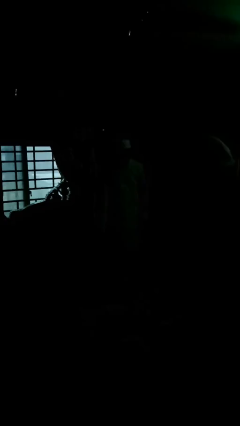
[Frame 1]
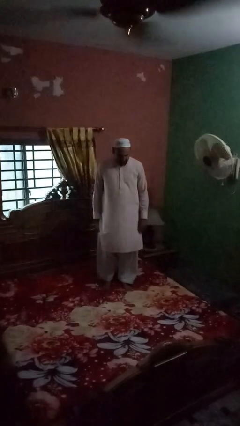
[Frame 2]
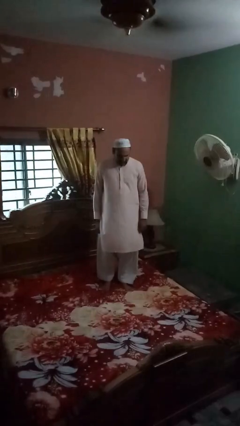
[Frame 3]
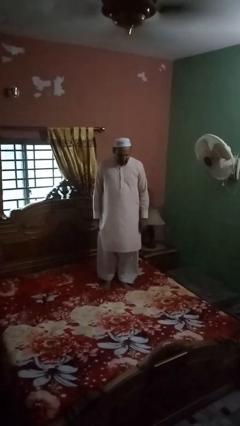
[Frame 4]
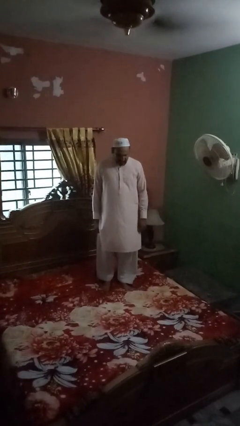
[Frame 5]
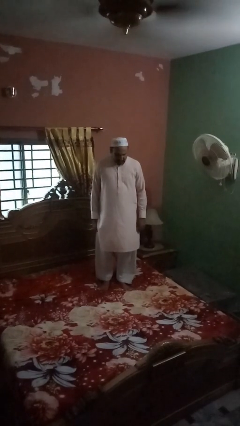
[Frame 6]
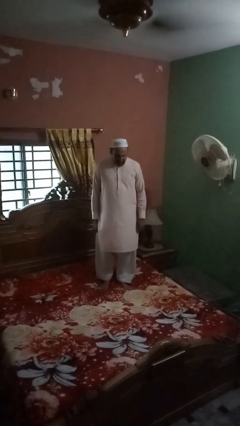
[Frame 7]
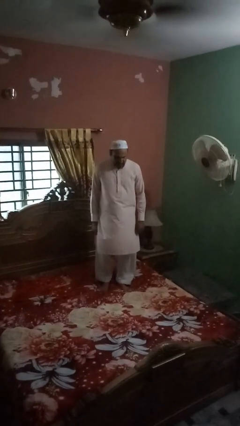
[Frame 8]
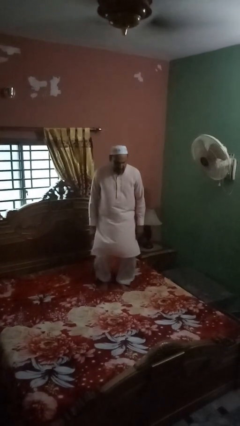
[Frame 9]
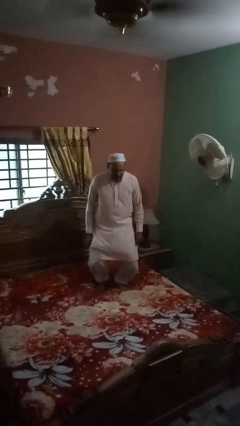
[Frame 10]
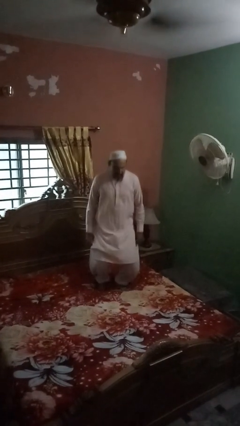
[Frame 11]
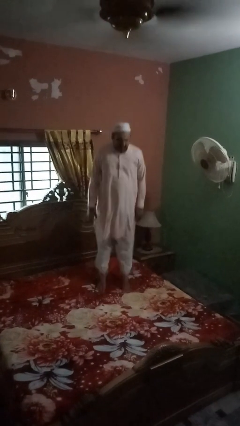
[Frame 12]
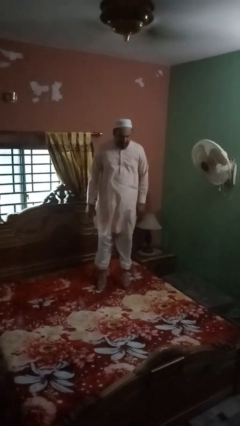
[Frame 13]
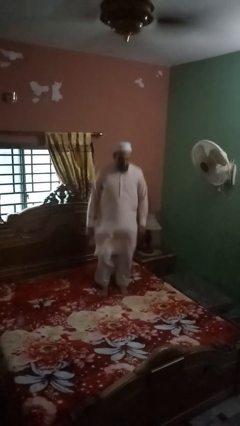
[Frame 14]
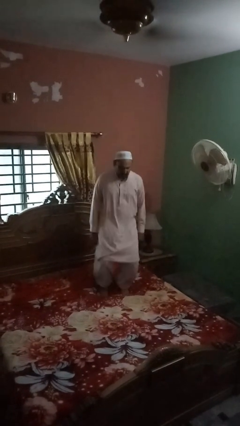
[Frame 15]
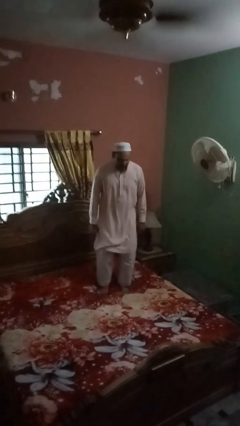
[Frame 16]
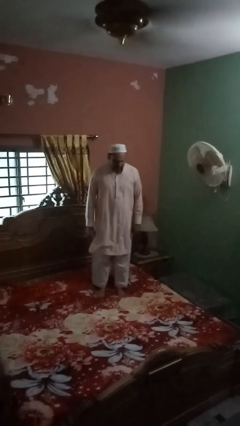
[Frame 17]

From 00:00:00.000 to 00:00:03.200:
person jumps on bed

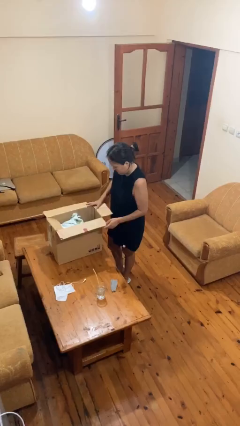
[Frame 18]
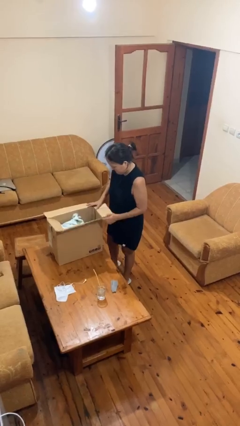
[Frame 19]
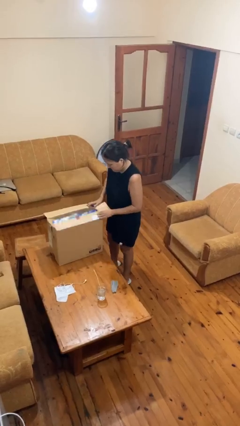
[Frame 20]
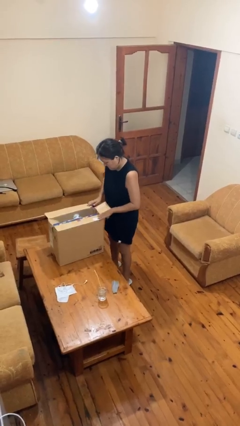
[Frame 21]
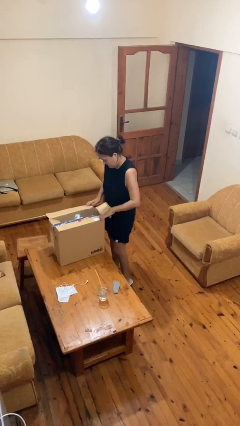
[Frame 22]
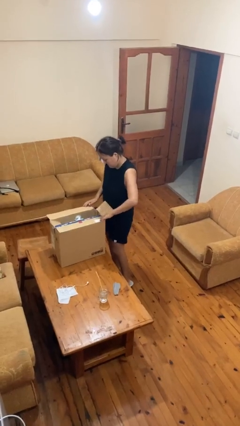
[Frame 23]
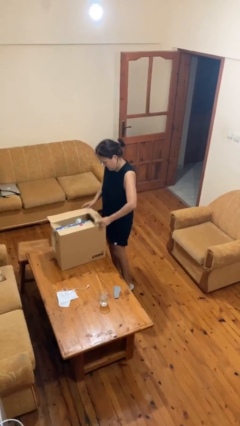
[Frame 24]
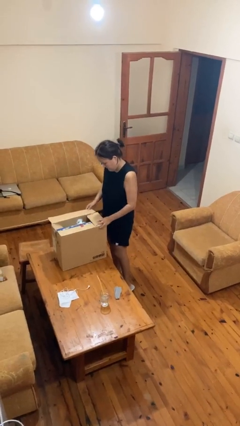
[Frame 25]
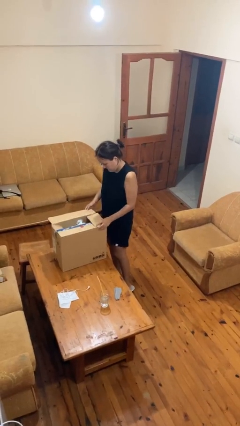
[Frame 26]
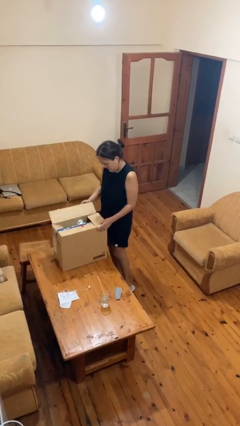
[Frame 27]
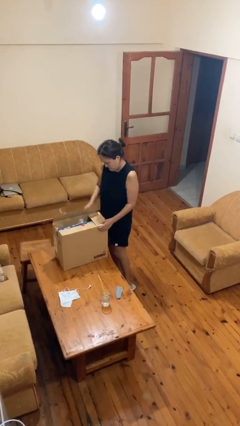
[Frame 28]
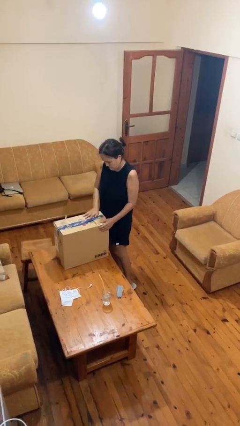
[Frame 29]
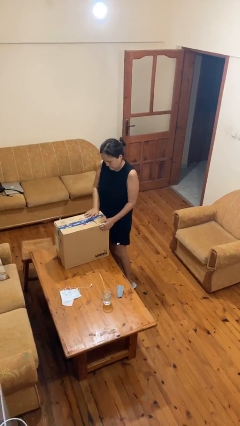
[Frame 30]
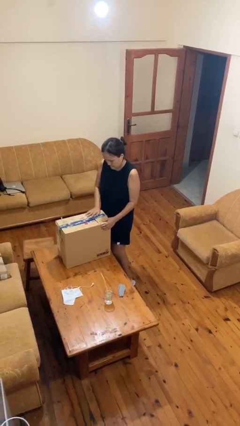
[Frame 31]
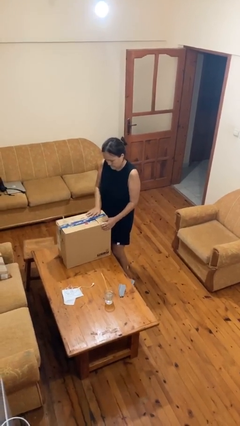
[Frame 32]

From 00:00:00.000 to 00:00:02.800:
person closes box

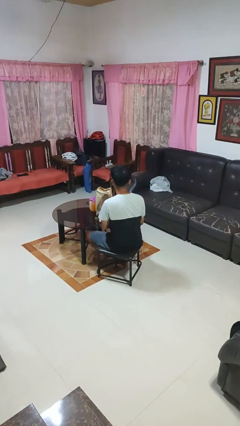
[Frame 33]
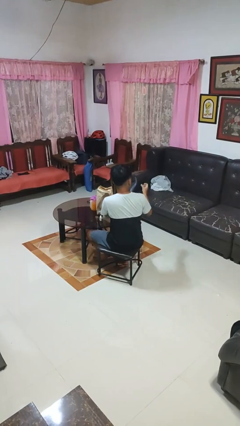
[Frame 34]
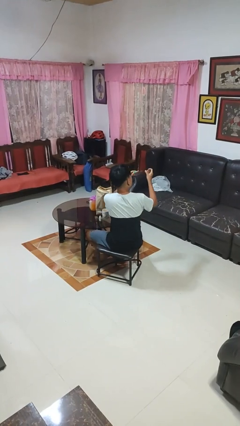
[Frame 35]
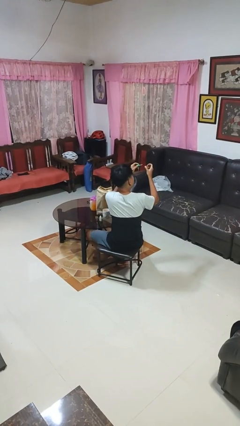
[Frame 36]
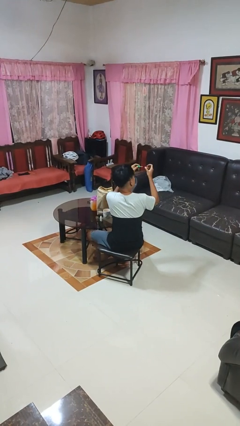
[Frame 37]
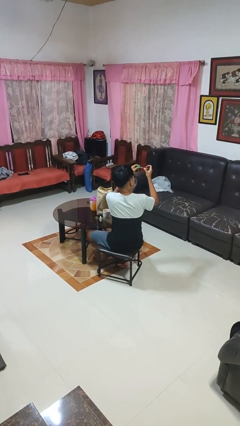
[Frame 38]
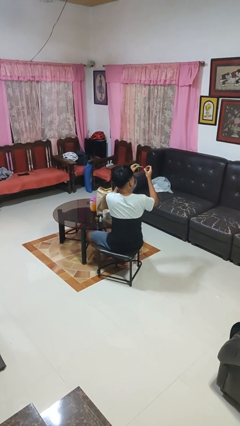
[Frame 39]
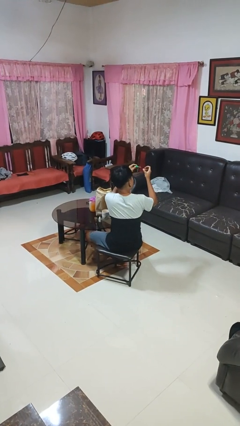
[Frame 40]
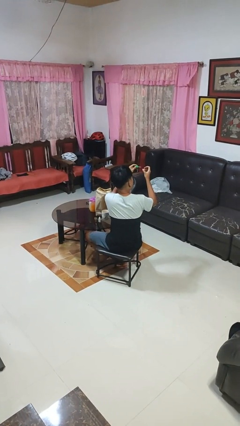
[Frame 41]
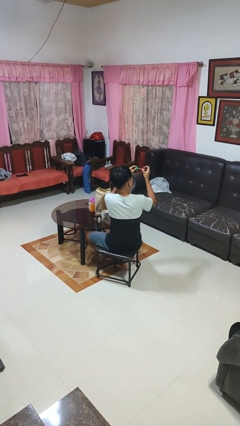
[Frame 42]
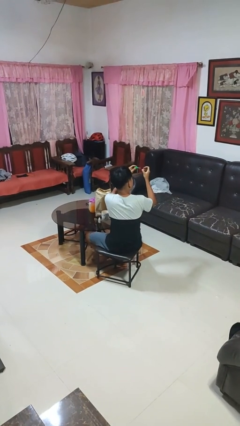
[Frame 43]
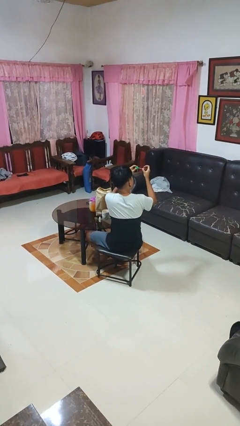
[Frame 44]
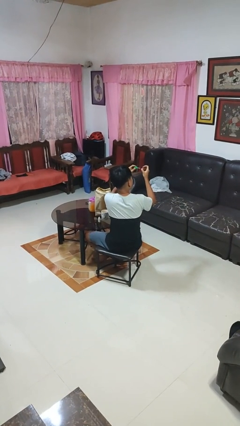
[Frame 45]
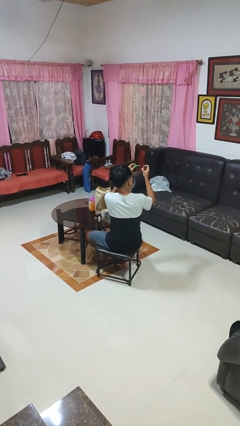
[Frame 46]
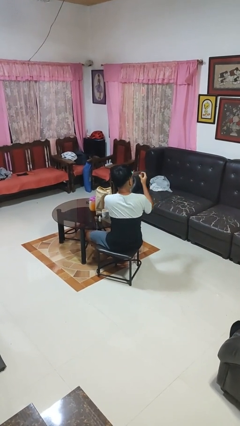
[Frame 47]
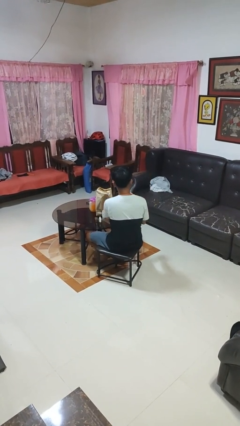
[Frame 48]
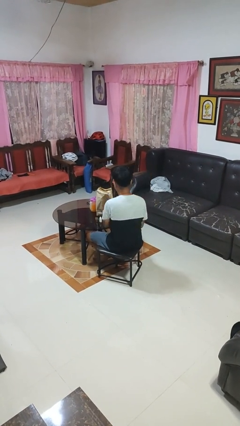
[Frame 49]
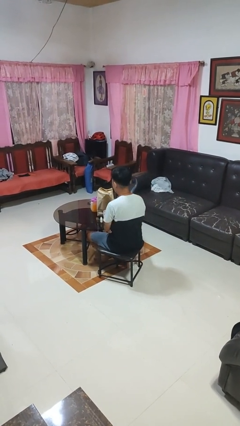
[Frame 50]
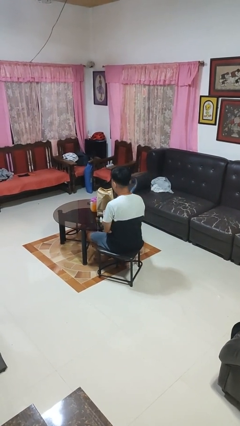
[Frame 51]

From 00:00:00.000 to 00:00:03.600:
person paints fingernails

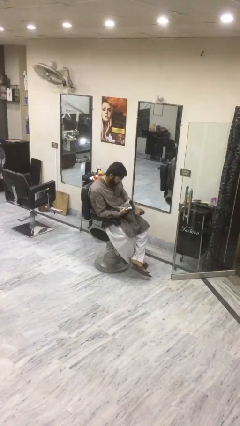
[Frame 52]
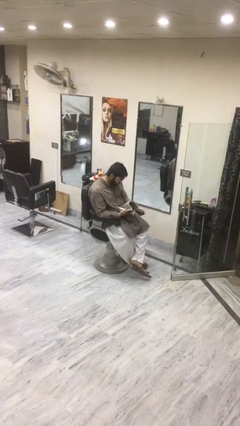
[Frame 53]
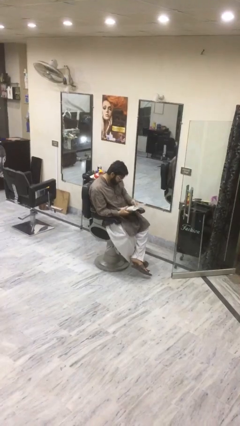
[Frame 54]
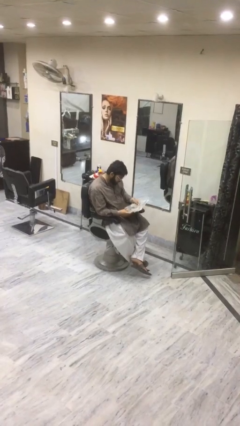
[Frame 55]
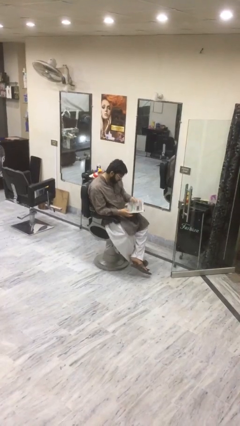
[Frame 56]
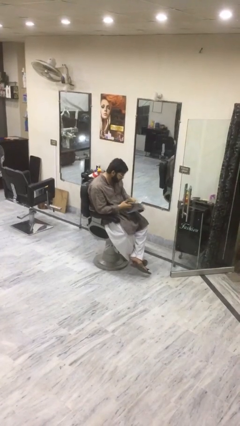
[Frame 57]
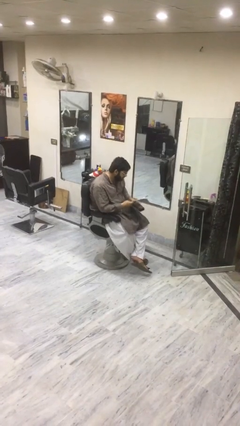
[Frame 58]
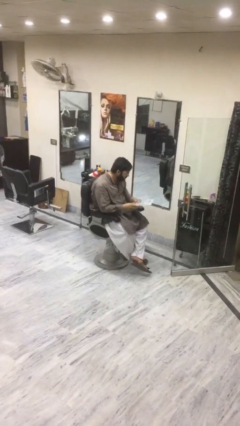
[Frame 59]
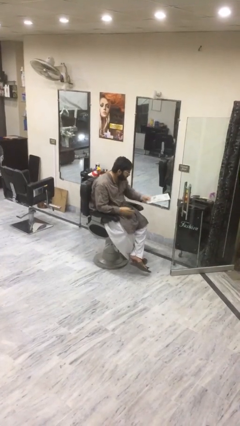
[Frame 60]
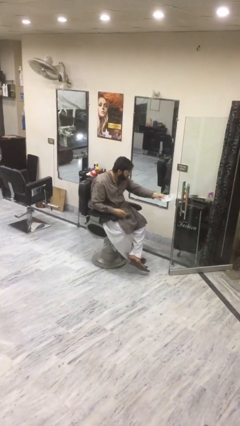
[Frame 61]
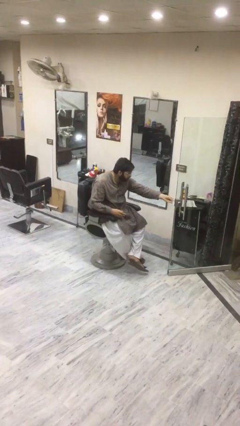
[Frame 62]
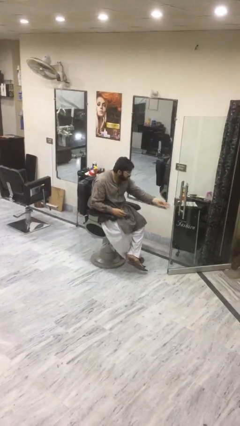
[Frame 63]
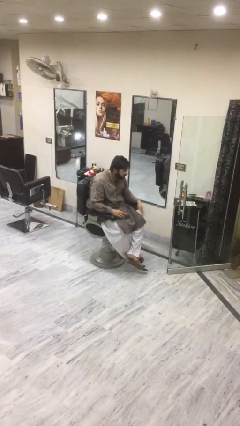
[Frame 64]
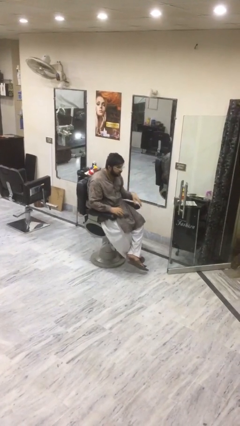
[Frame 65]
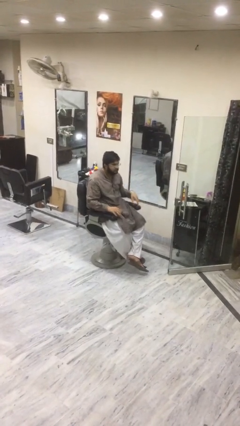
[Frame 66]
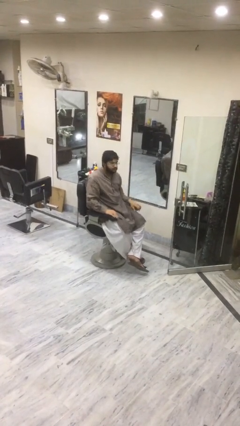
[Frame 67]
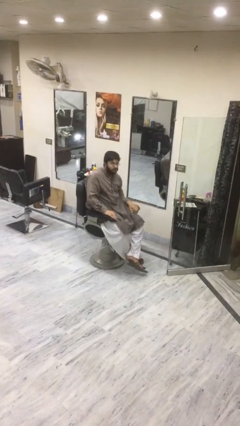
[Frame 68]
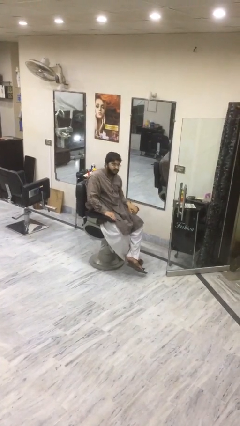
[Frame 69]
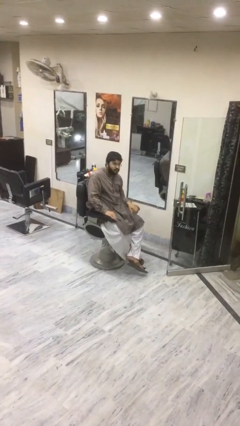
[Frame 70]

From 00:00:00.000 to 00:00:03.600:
person puts down object on table

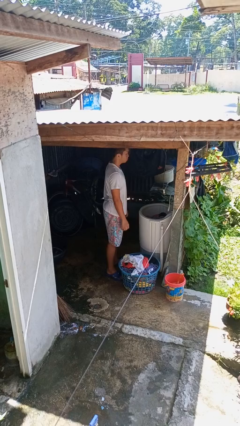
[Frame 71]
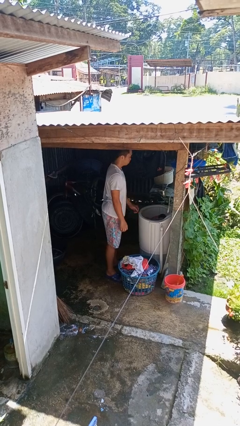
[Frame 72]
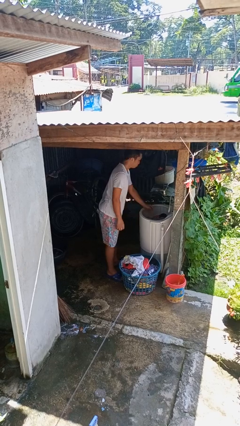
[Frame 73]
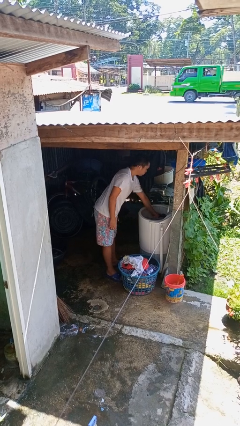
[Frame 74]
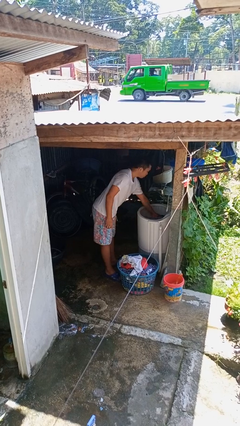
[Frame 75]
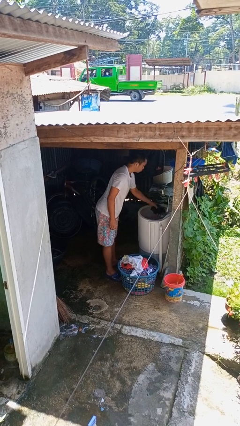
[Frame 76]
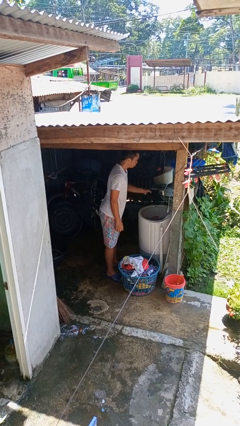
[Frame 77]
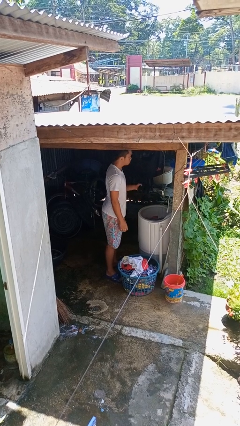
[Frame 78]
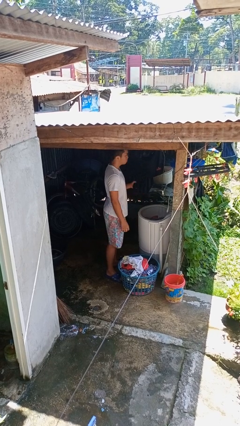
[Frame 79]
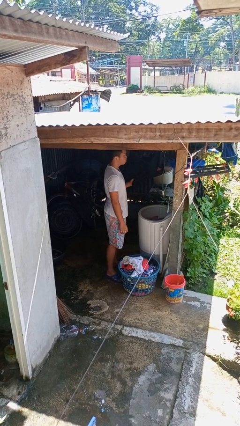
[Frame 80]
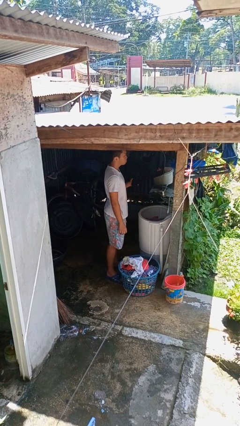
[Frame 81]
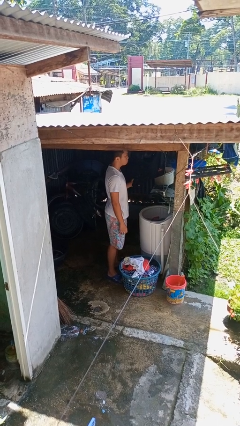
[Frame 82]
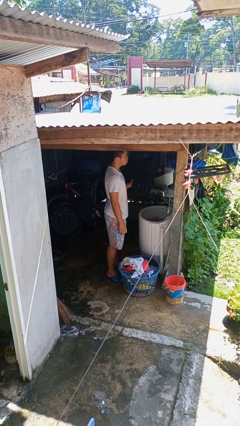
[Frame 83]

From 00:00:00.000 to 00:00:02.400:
person unloads clotheswasher

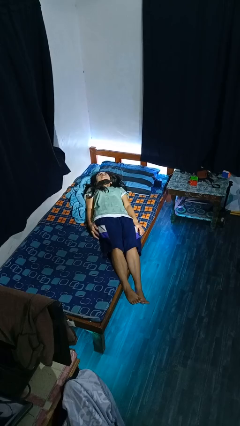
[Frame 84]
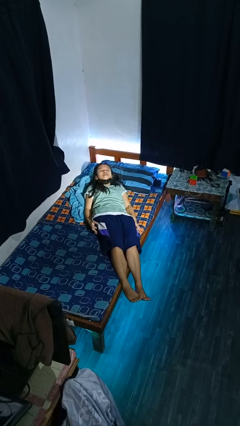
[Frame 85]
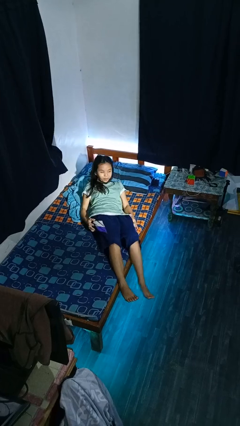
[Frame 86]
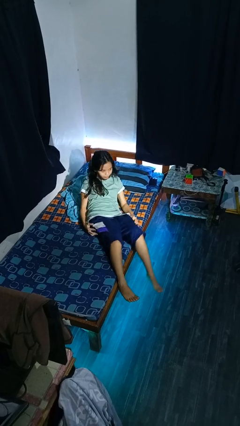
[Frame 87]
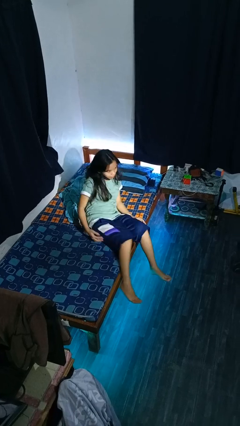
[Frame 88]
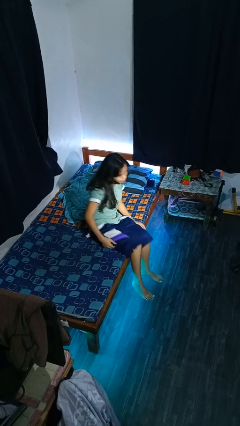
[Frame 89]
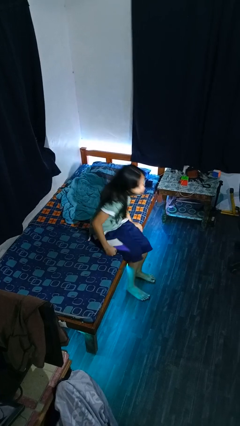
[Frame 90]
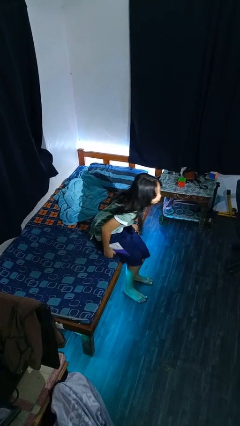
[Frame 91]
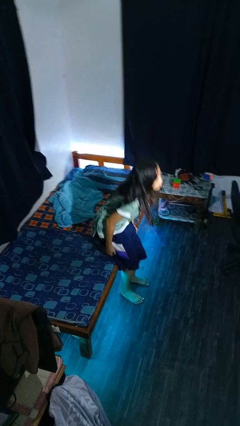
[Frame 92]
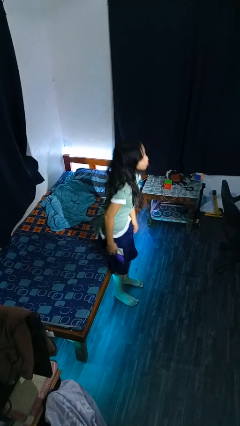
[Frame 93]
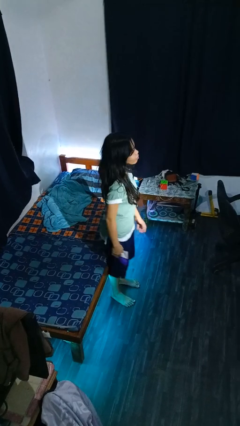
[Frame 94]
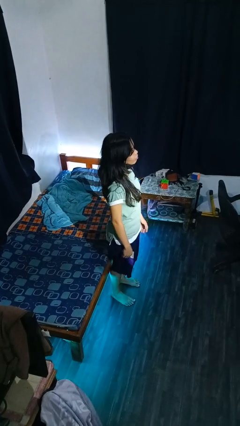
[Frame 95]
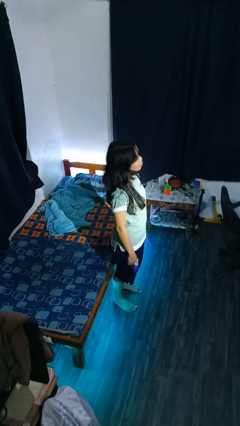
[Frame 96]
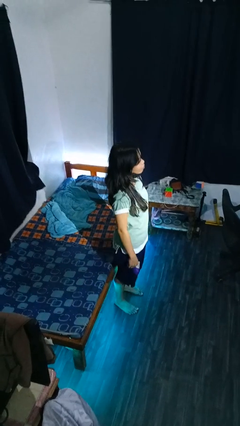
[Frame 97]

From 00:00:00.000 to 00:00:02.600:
person stands up
